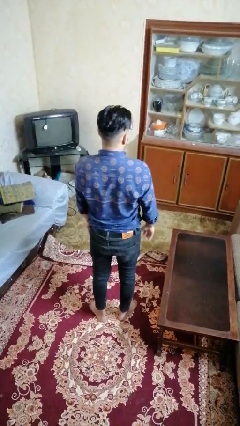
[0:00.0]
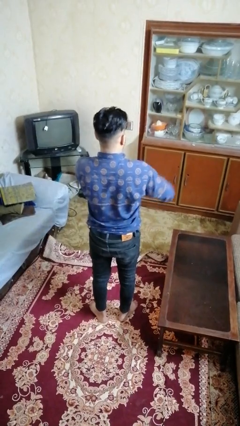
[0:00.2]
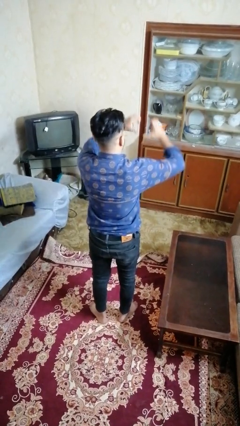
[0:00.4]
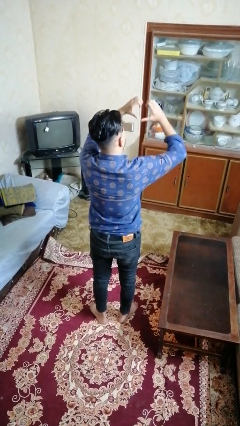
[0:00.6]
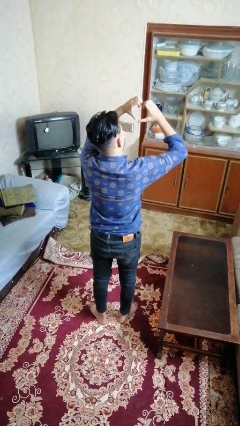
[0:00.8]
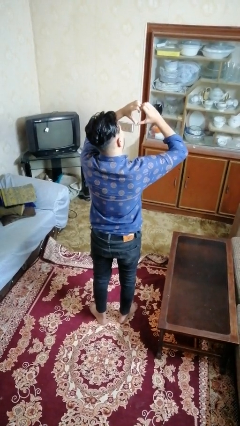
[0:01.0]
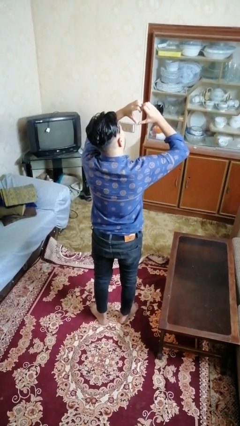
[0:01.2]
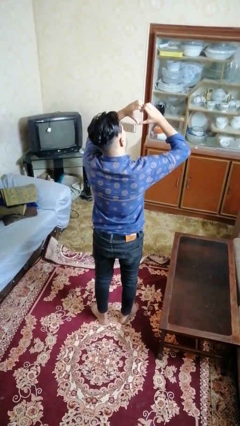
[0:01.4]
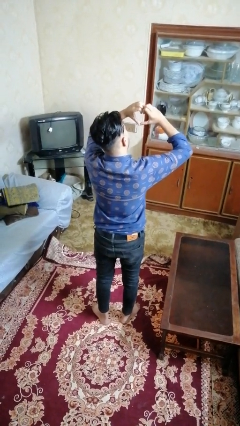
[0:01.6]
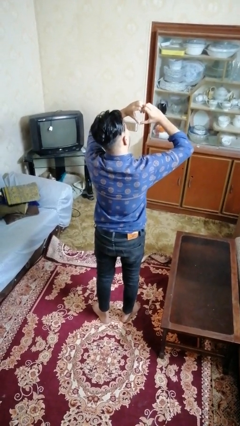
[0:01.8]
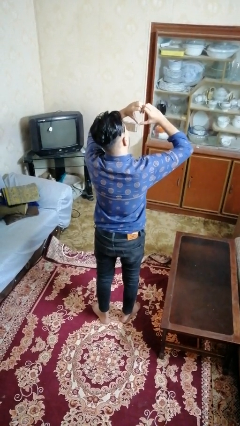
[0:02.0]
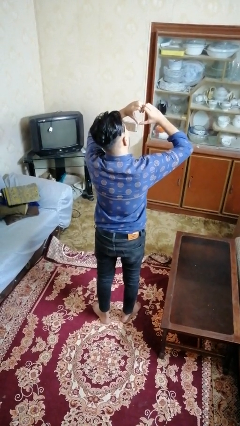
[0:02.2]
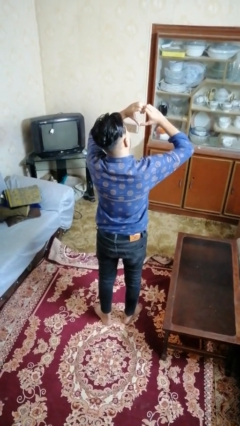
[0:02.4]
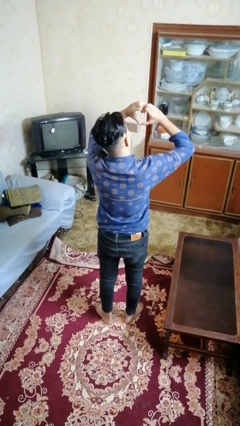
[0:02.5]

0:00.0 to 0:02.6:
person gestures heart

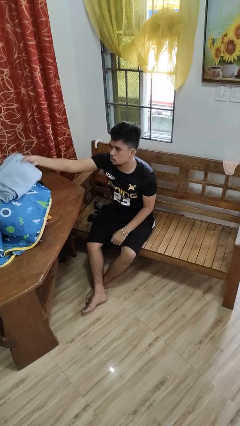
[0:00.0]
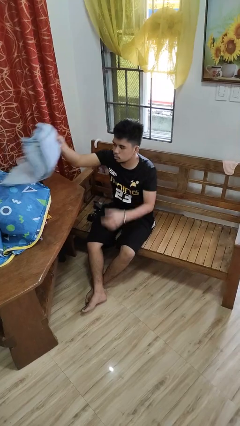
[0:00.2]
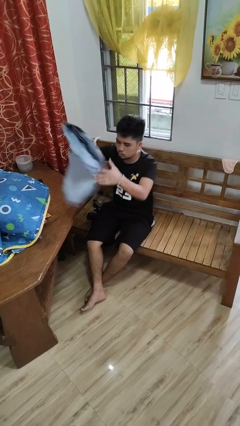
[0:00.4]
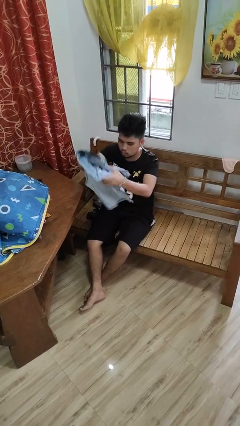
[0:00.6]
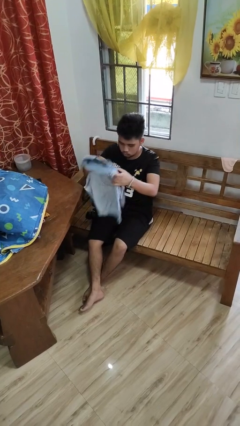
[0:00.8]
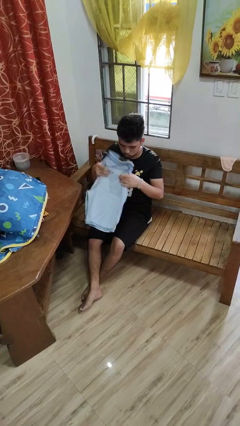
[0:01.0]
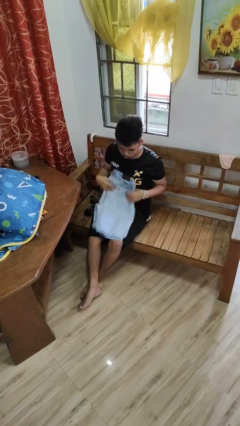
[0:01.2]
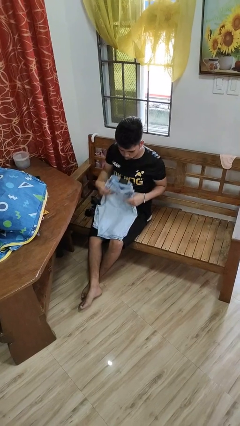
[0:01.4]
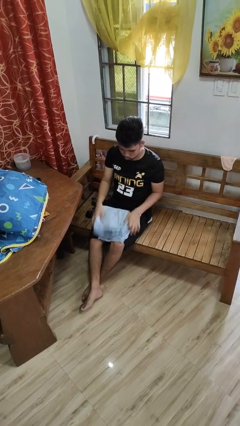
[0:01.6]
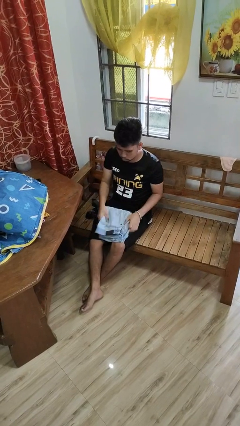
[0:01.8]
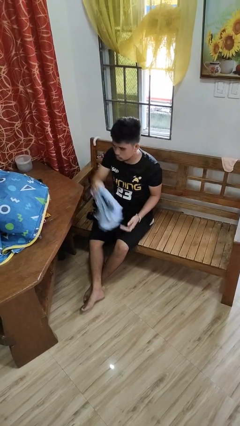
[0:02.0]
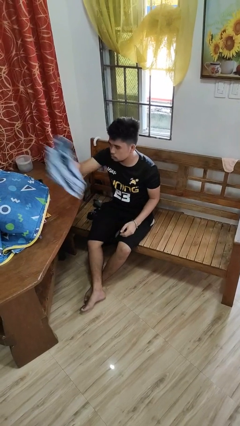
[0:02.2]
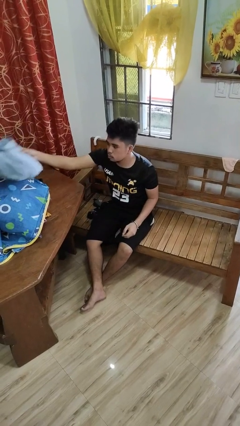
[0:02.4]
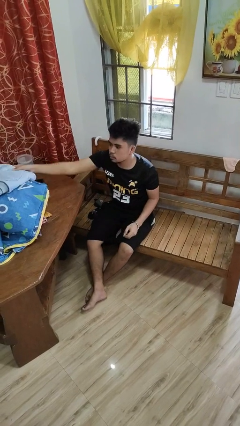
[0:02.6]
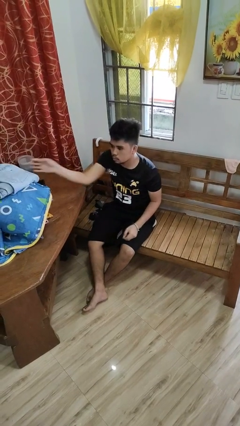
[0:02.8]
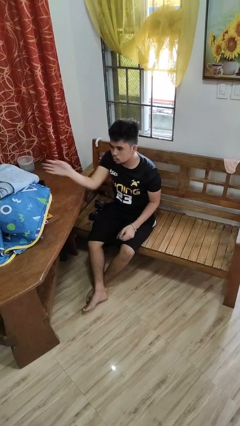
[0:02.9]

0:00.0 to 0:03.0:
person folds pants

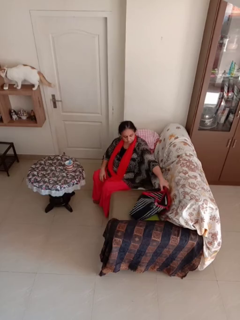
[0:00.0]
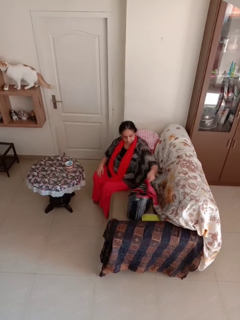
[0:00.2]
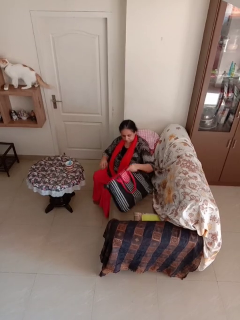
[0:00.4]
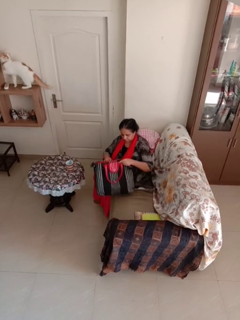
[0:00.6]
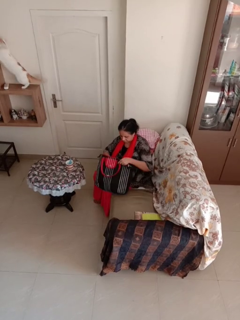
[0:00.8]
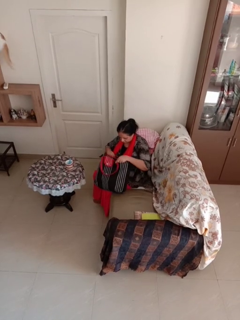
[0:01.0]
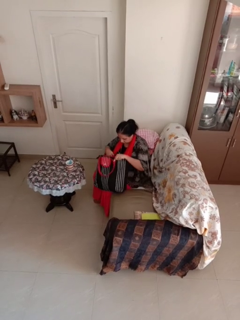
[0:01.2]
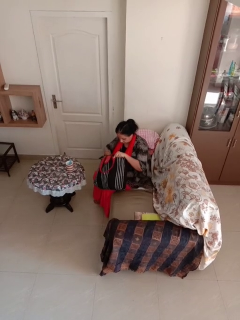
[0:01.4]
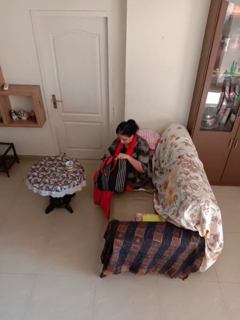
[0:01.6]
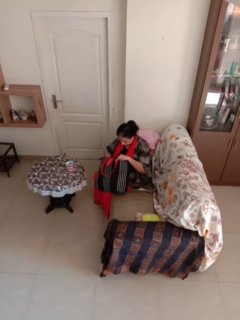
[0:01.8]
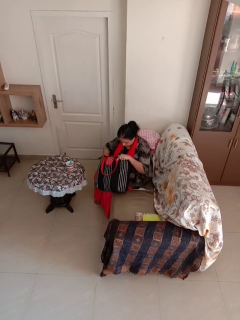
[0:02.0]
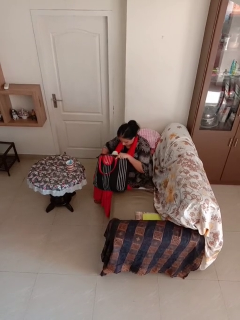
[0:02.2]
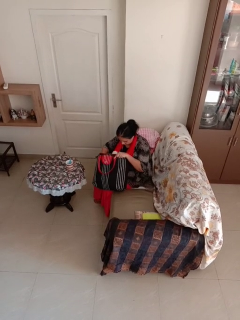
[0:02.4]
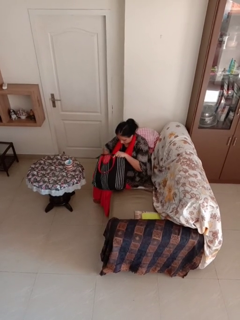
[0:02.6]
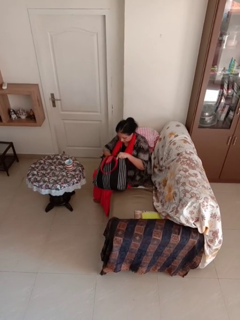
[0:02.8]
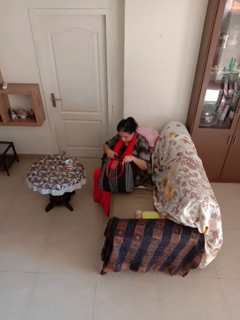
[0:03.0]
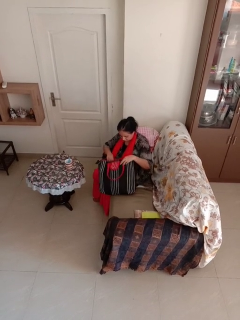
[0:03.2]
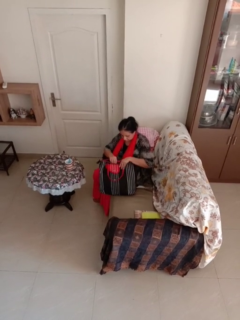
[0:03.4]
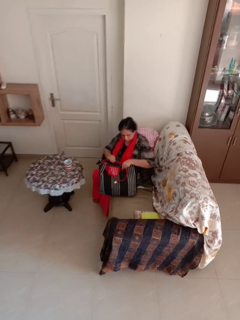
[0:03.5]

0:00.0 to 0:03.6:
person searches in bag

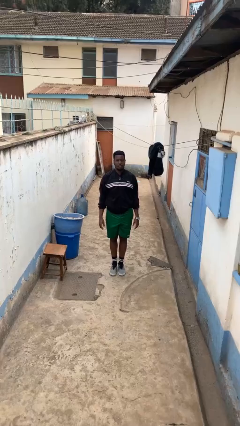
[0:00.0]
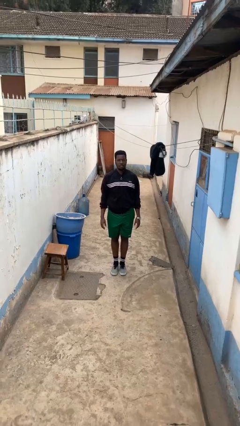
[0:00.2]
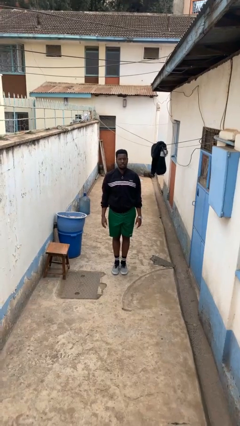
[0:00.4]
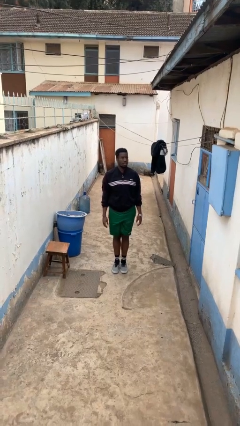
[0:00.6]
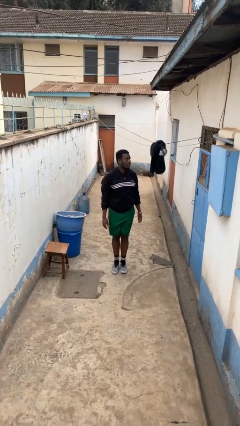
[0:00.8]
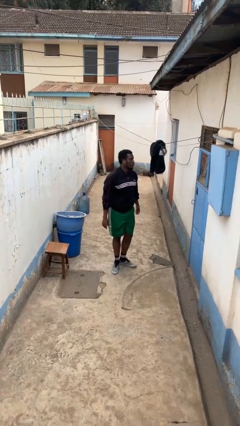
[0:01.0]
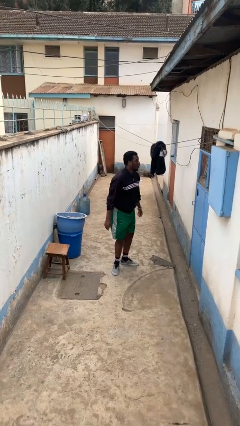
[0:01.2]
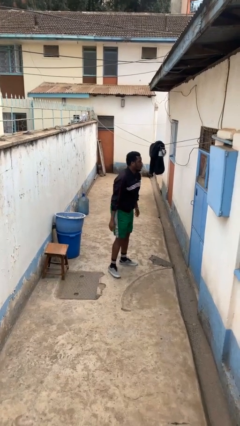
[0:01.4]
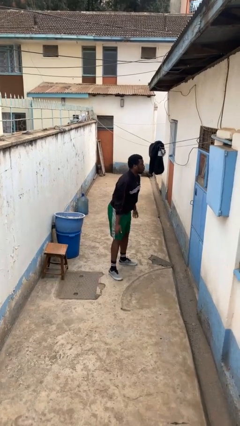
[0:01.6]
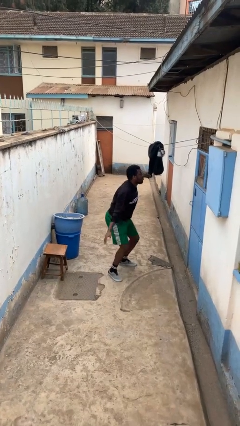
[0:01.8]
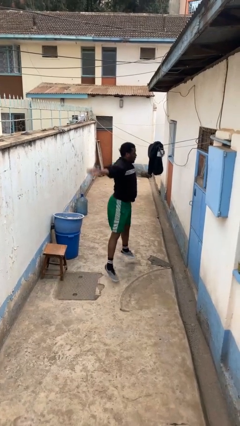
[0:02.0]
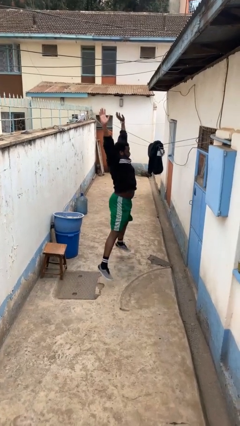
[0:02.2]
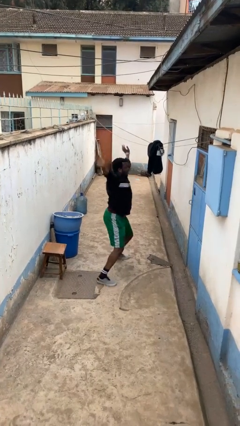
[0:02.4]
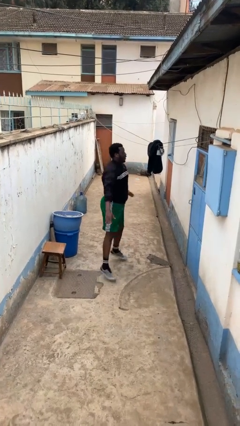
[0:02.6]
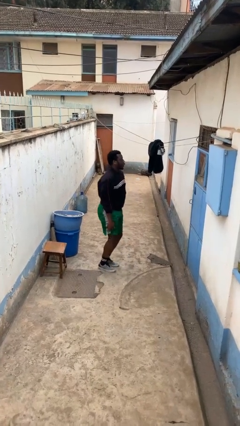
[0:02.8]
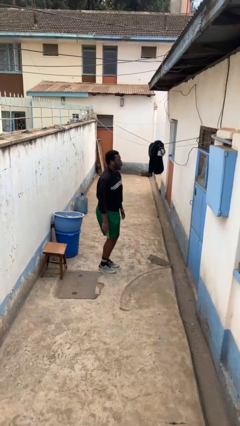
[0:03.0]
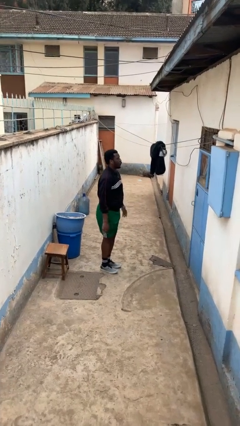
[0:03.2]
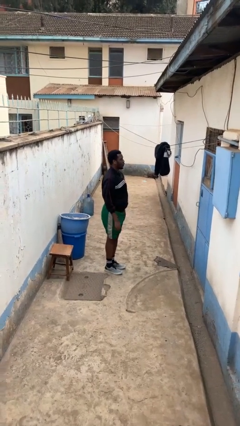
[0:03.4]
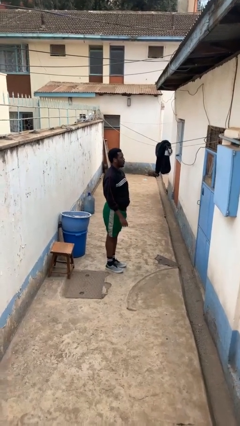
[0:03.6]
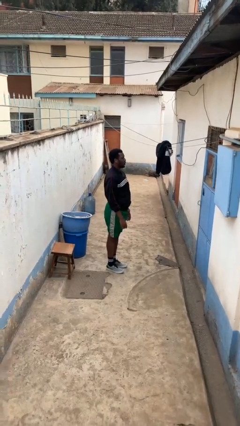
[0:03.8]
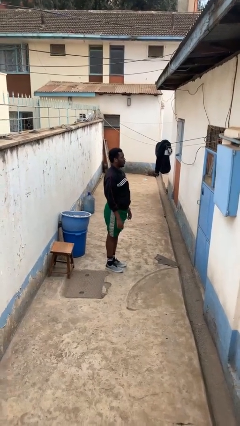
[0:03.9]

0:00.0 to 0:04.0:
person exercises with jumping jacks

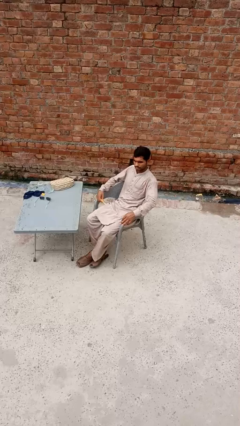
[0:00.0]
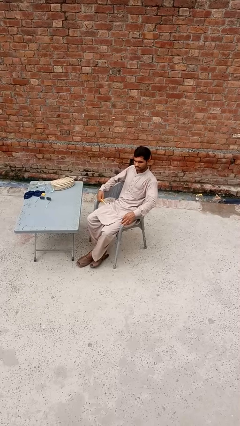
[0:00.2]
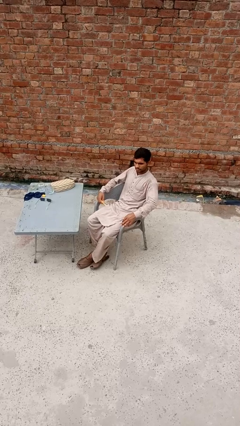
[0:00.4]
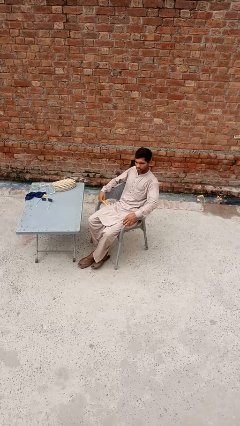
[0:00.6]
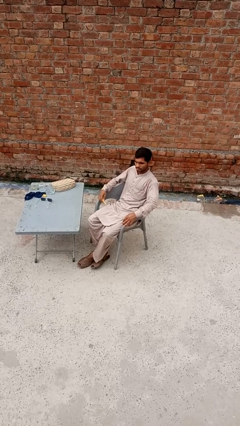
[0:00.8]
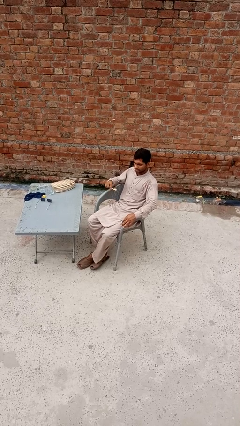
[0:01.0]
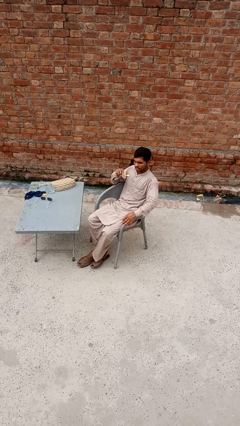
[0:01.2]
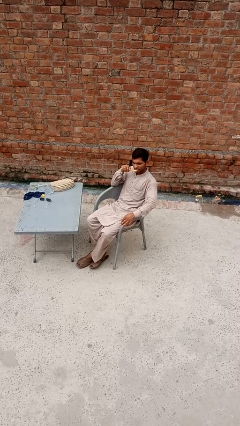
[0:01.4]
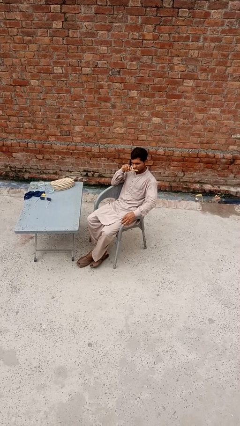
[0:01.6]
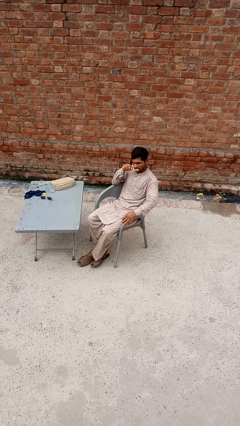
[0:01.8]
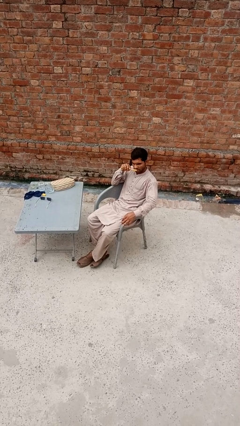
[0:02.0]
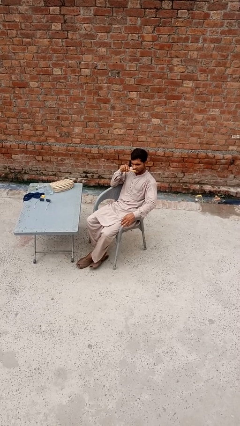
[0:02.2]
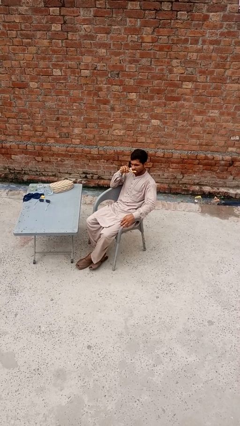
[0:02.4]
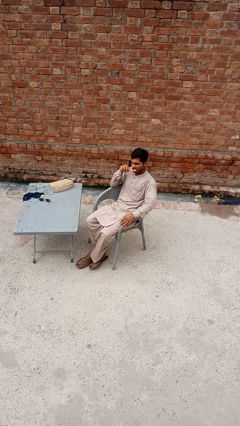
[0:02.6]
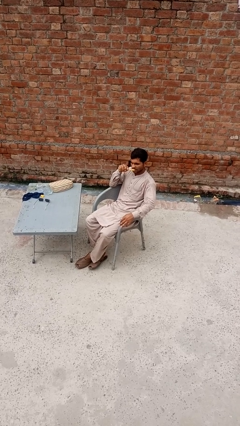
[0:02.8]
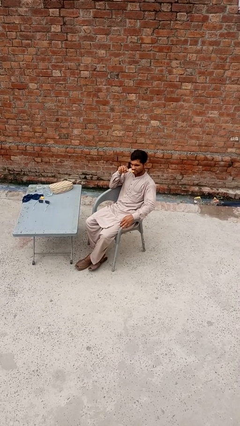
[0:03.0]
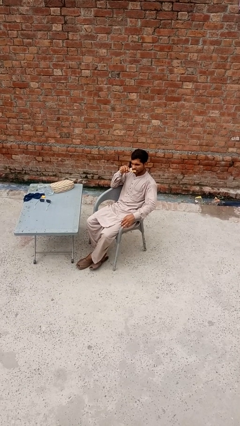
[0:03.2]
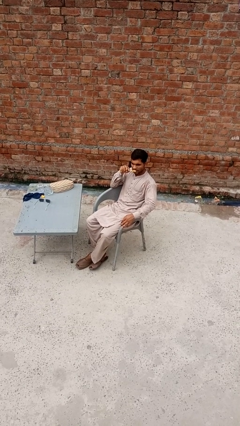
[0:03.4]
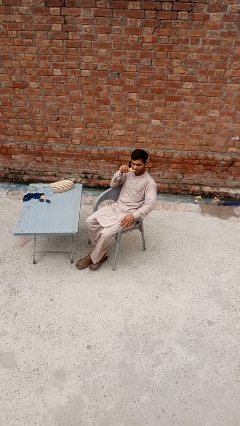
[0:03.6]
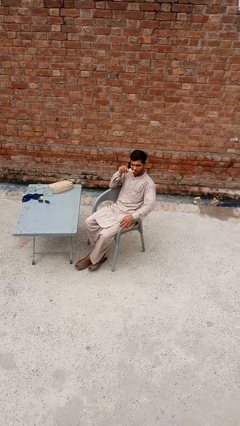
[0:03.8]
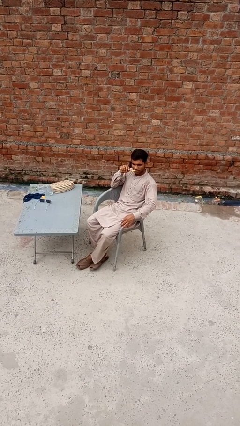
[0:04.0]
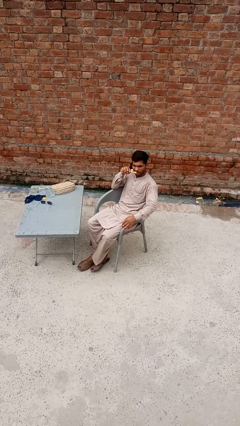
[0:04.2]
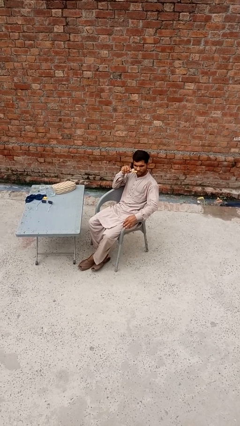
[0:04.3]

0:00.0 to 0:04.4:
person brushes teeth
